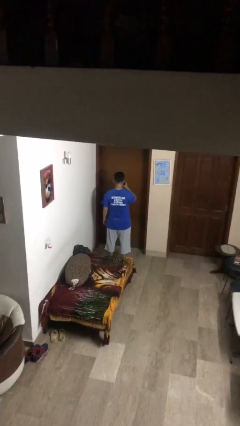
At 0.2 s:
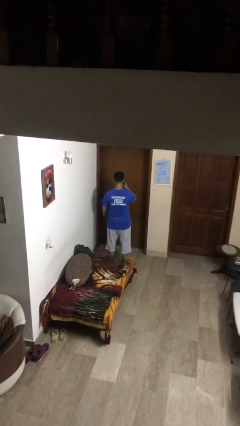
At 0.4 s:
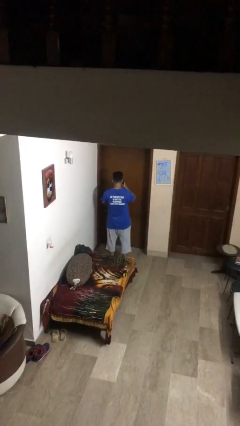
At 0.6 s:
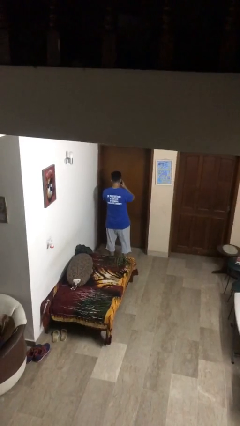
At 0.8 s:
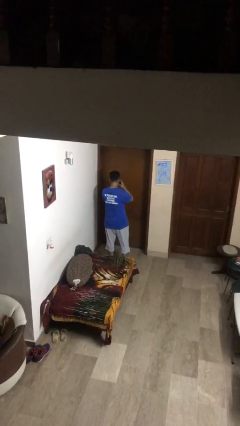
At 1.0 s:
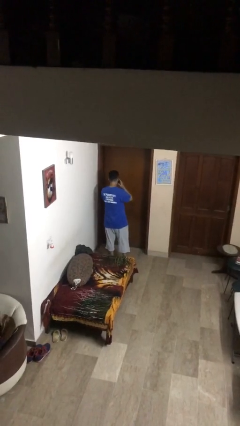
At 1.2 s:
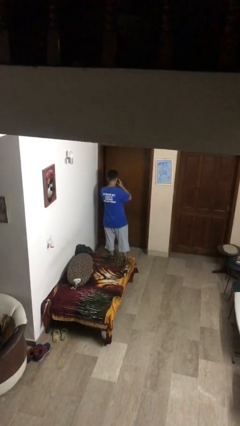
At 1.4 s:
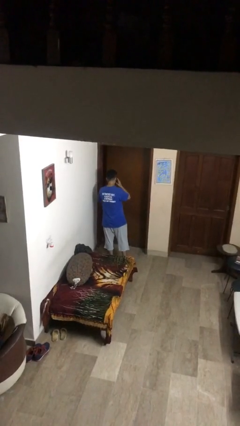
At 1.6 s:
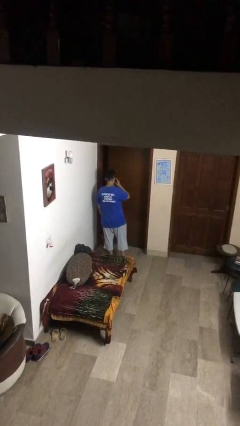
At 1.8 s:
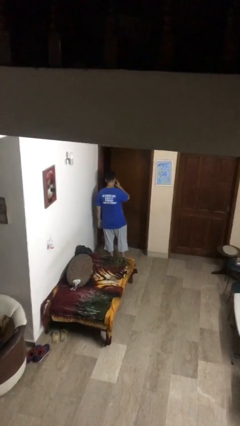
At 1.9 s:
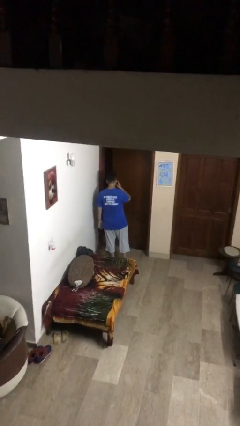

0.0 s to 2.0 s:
person opens facility door

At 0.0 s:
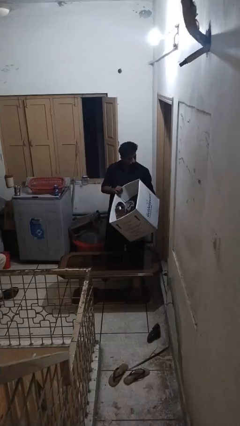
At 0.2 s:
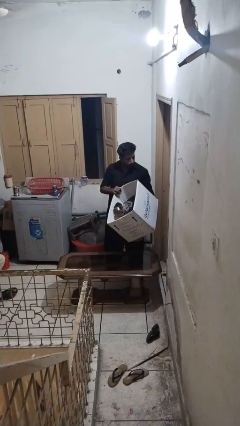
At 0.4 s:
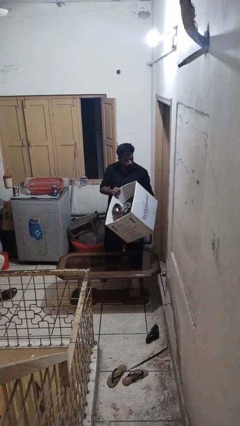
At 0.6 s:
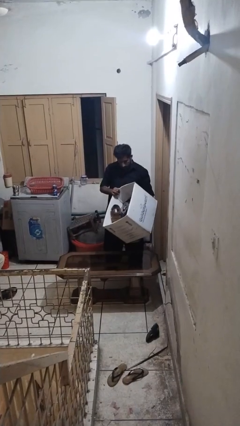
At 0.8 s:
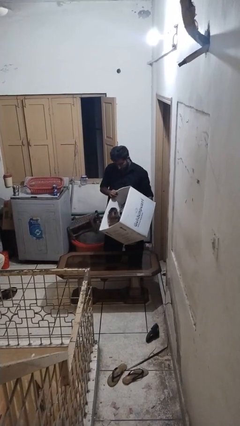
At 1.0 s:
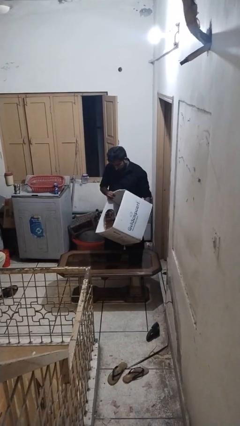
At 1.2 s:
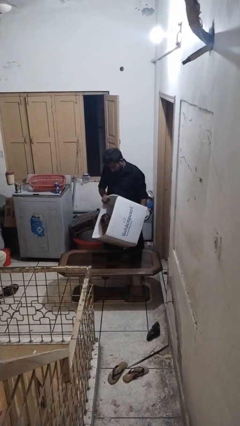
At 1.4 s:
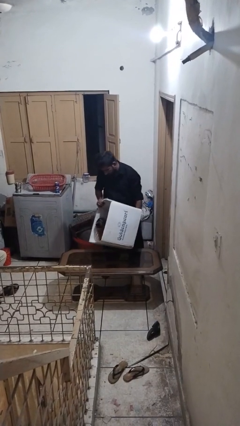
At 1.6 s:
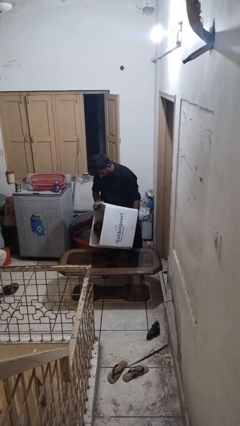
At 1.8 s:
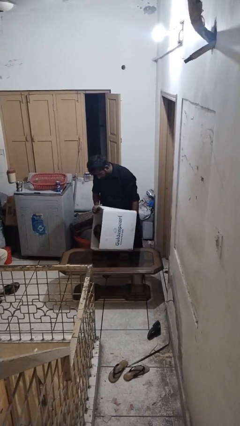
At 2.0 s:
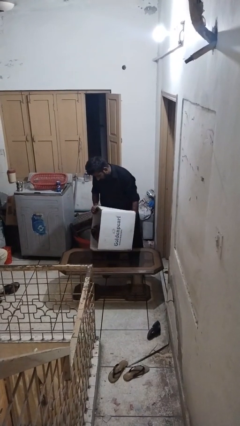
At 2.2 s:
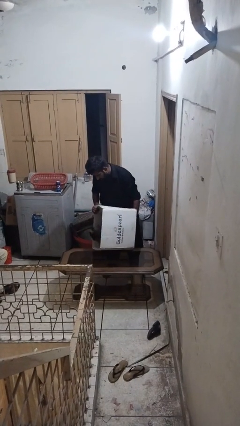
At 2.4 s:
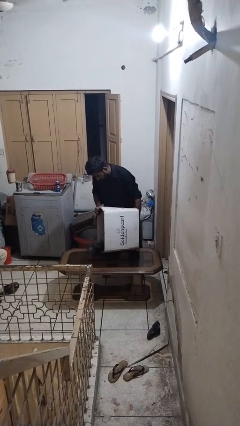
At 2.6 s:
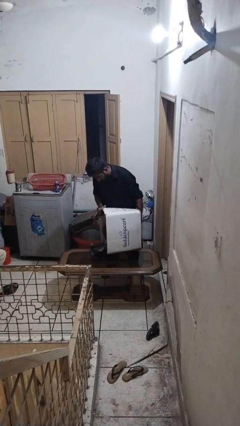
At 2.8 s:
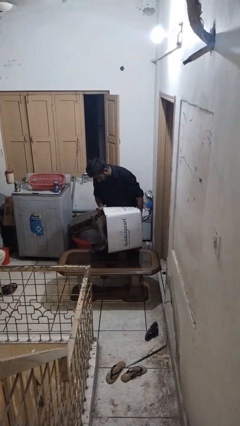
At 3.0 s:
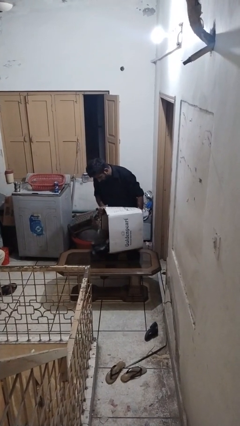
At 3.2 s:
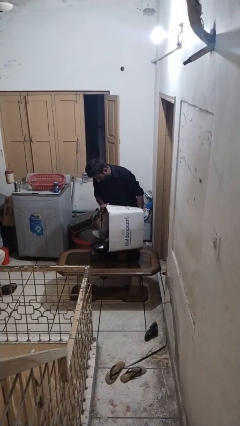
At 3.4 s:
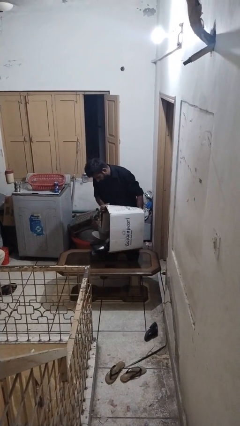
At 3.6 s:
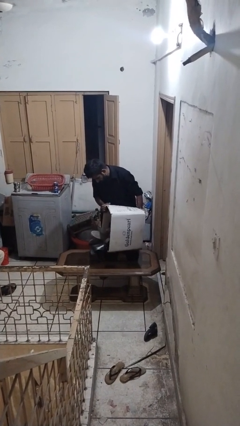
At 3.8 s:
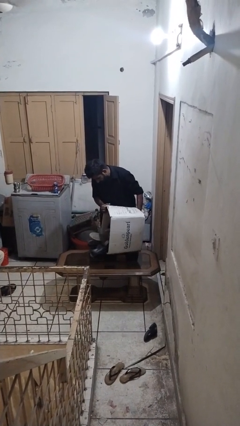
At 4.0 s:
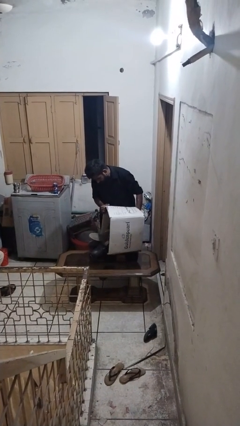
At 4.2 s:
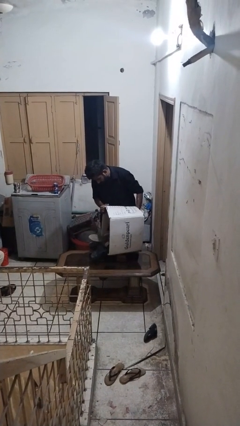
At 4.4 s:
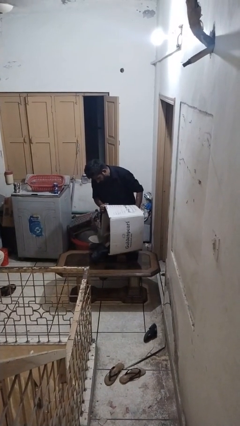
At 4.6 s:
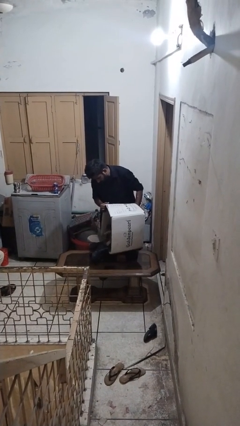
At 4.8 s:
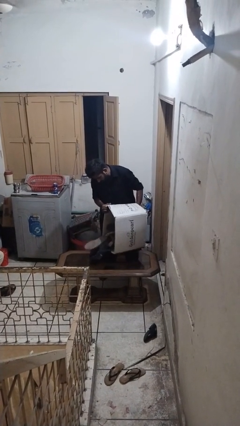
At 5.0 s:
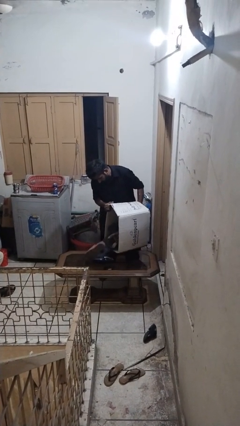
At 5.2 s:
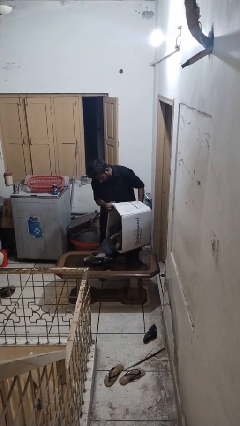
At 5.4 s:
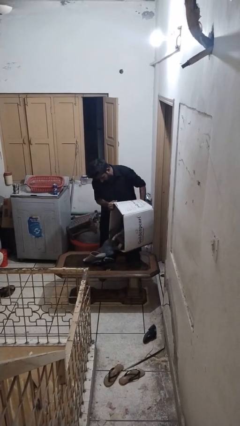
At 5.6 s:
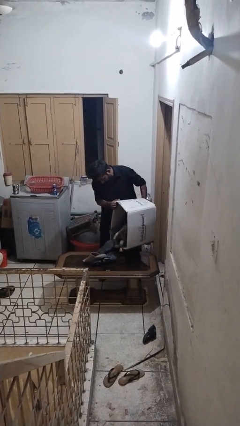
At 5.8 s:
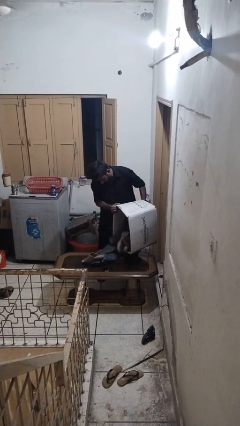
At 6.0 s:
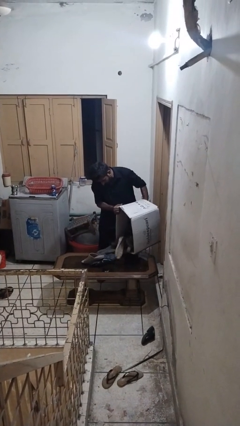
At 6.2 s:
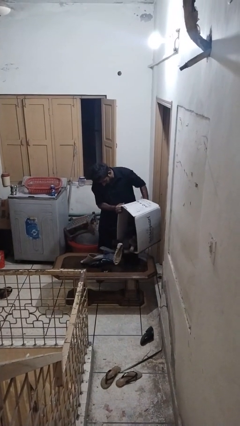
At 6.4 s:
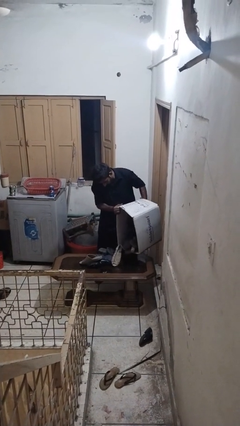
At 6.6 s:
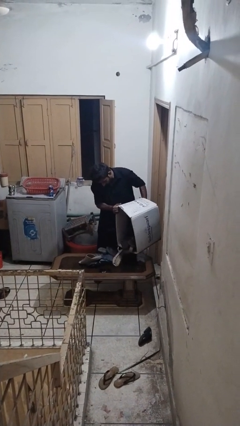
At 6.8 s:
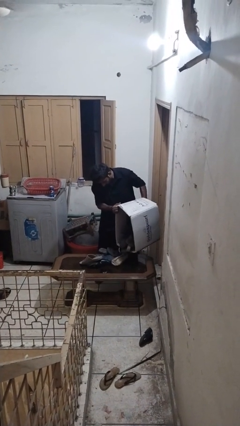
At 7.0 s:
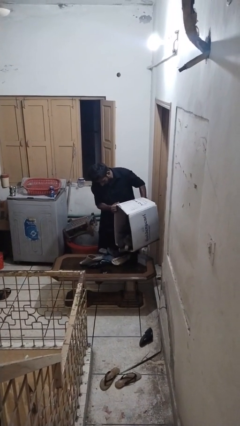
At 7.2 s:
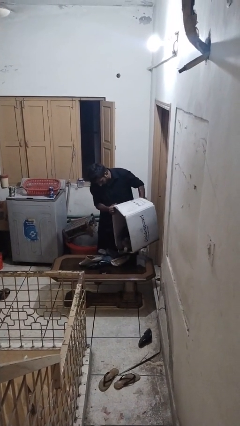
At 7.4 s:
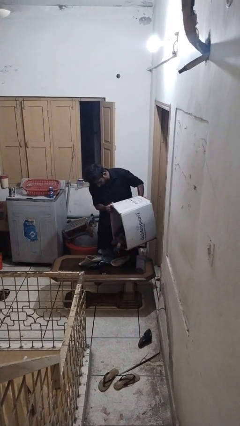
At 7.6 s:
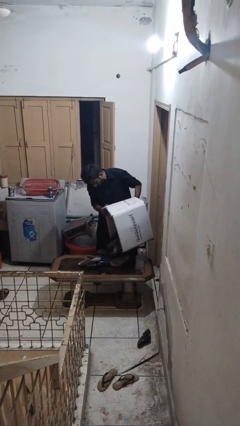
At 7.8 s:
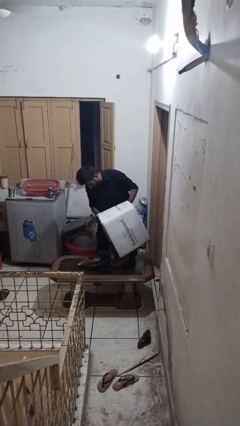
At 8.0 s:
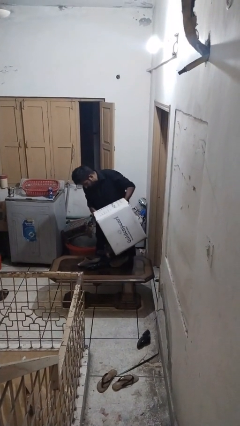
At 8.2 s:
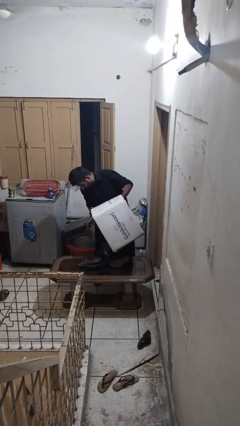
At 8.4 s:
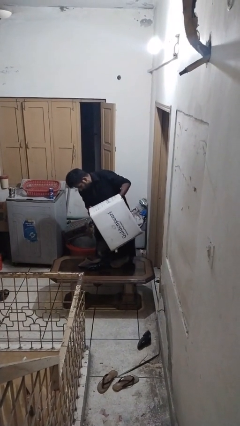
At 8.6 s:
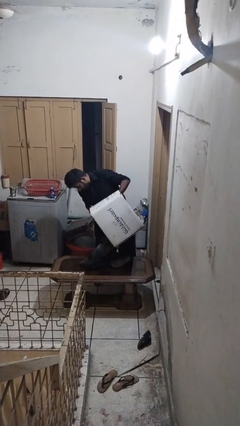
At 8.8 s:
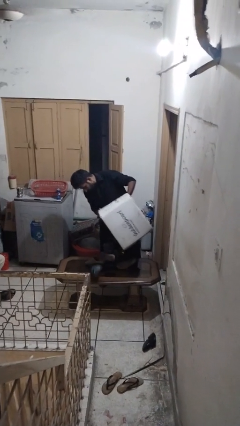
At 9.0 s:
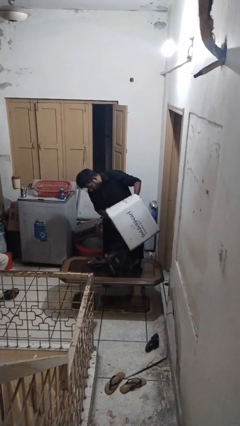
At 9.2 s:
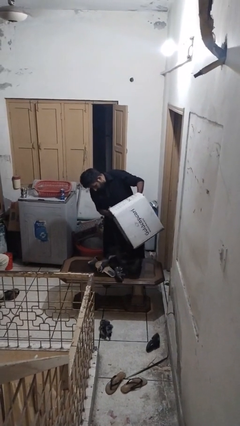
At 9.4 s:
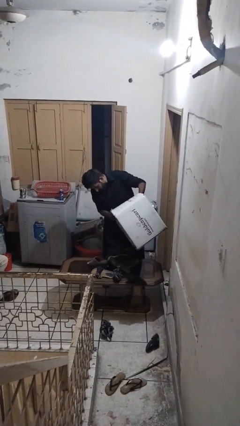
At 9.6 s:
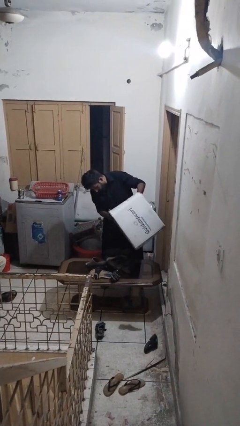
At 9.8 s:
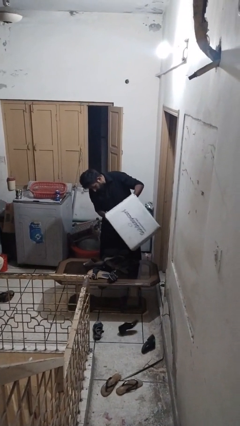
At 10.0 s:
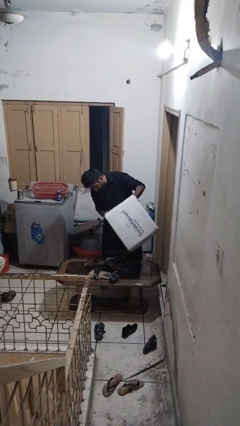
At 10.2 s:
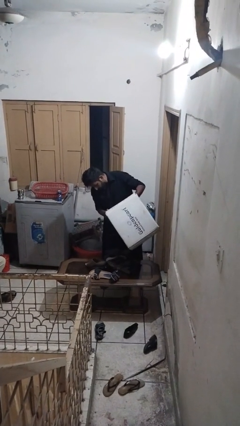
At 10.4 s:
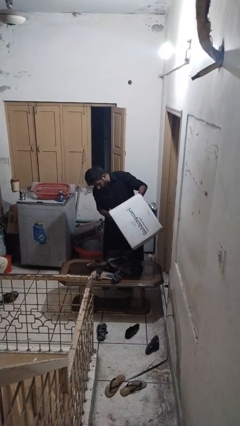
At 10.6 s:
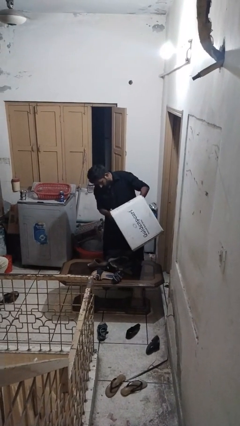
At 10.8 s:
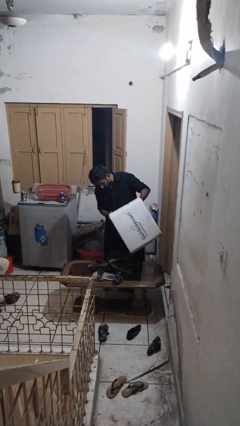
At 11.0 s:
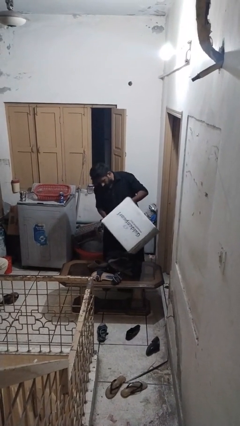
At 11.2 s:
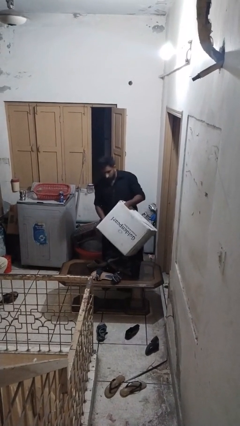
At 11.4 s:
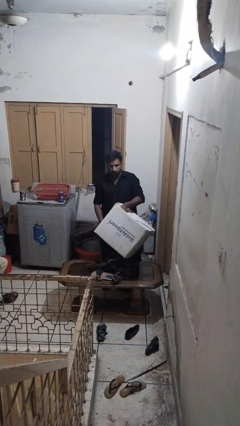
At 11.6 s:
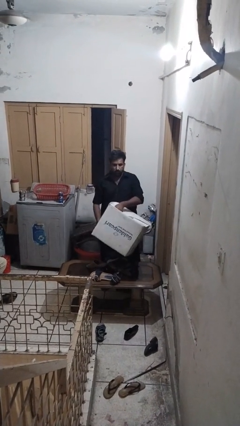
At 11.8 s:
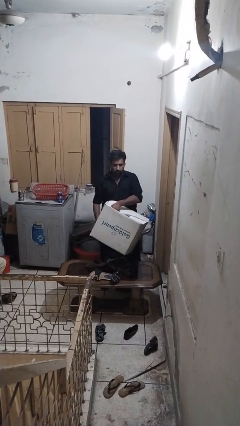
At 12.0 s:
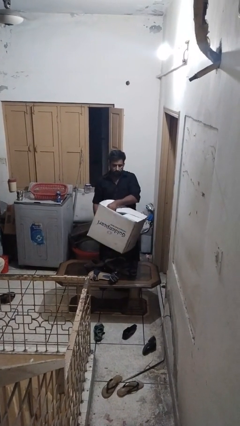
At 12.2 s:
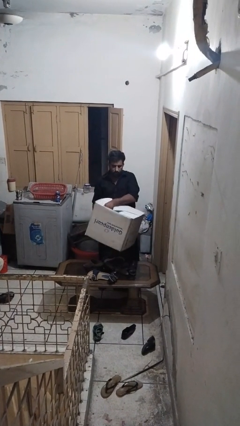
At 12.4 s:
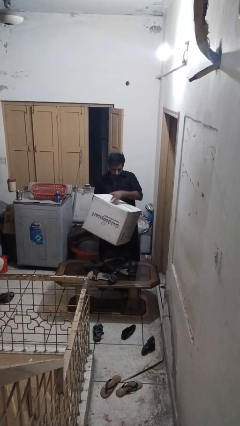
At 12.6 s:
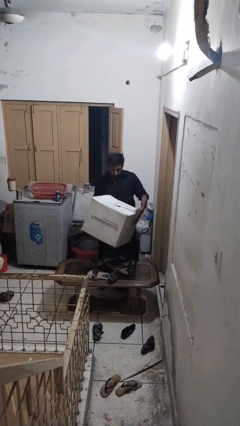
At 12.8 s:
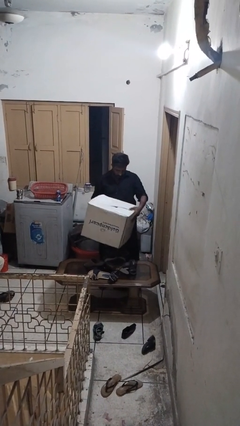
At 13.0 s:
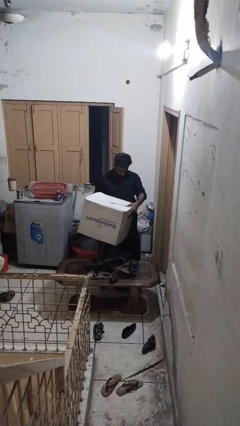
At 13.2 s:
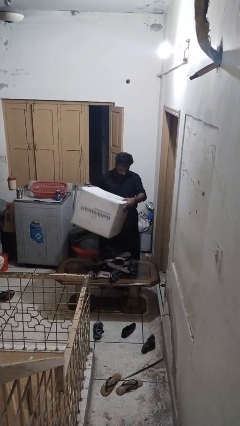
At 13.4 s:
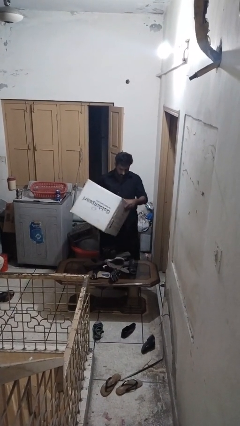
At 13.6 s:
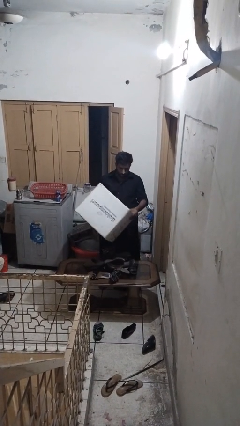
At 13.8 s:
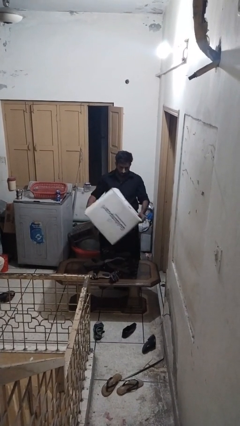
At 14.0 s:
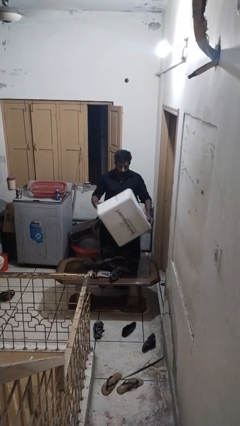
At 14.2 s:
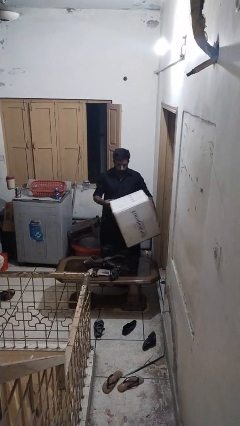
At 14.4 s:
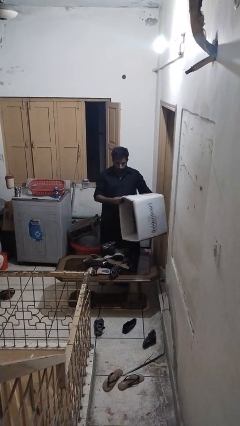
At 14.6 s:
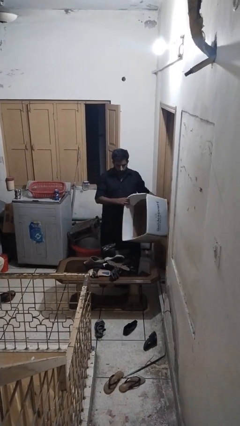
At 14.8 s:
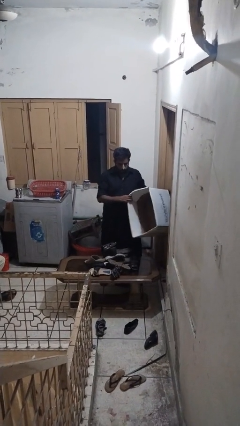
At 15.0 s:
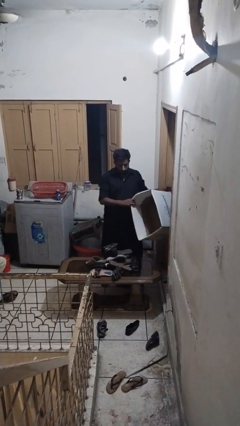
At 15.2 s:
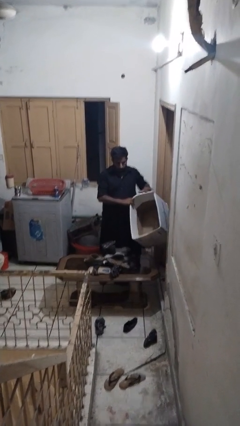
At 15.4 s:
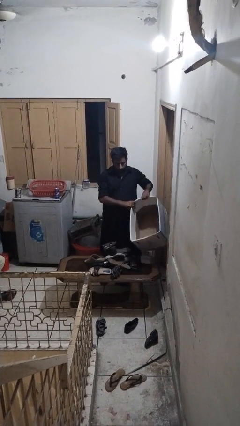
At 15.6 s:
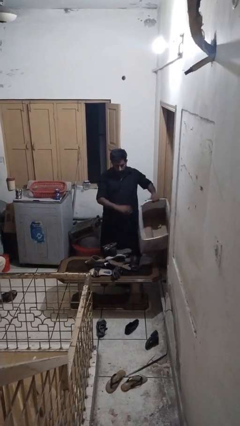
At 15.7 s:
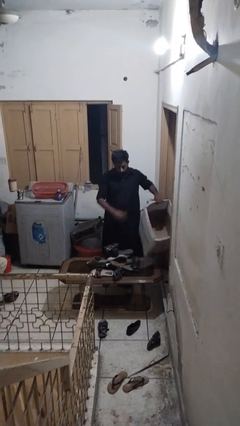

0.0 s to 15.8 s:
person unloads box onto table

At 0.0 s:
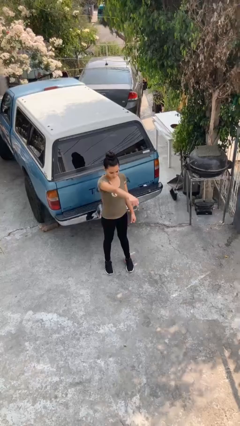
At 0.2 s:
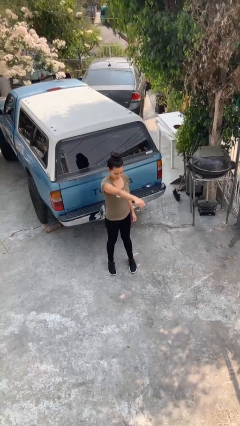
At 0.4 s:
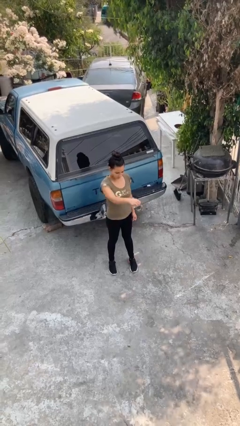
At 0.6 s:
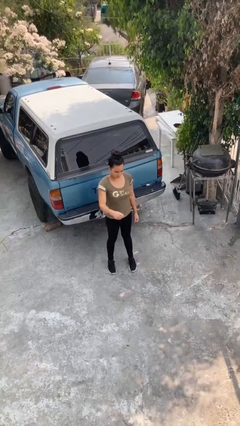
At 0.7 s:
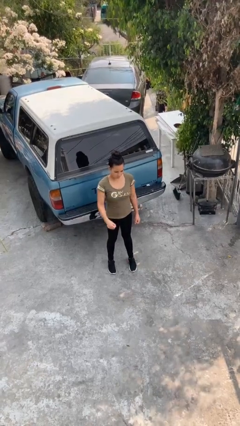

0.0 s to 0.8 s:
person karate chop
